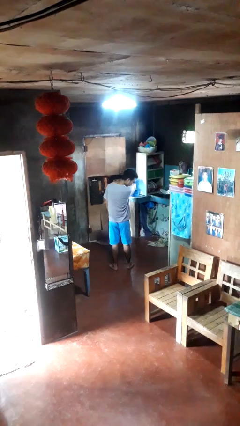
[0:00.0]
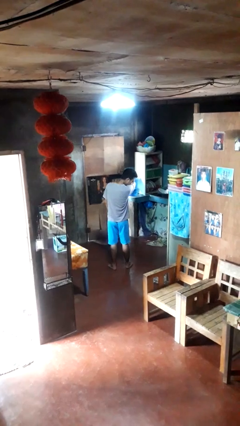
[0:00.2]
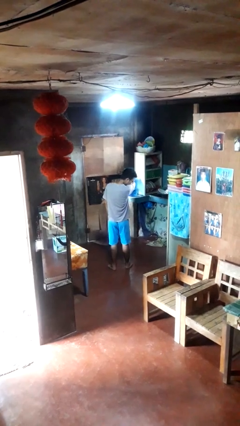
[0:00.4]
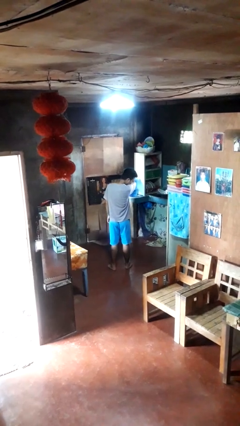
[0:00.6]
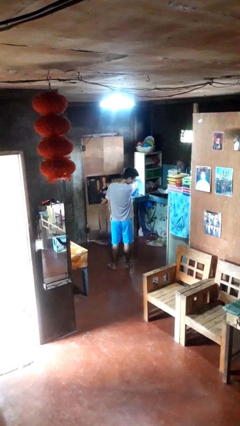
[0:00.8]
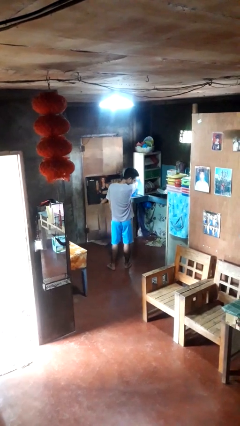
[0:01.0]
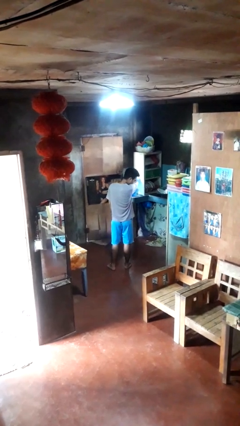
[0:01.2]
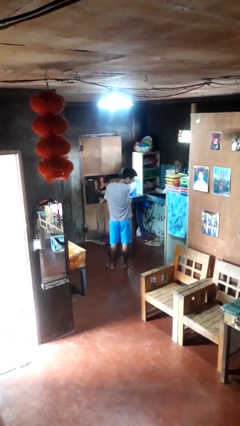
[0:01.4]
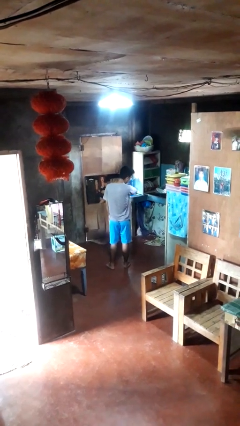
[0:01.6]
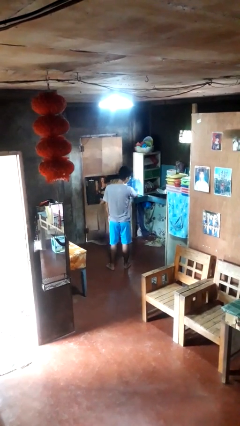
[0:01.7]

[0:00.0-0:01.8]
person sneezes into arm

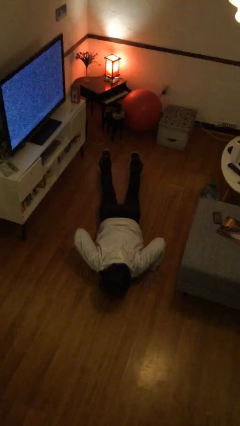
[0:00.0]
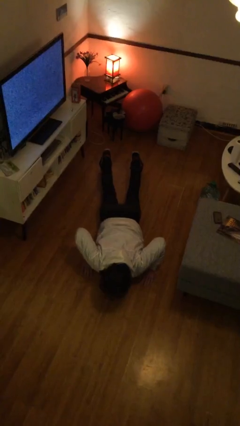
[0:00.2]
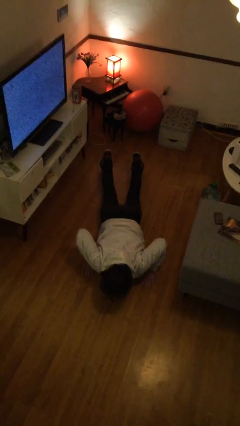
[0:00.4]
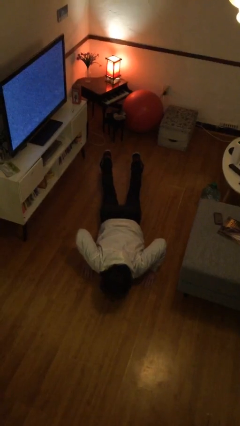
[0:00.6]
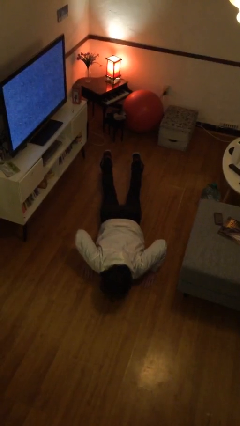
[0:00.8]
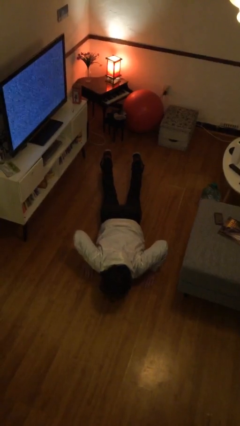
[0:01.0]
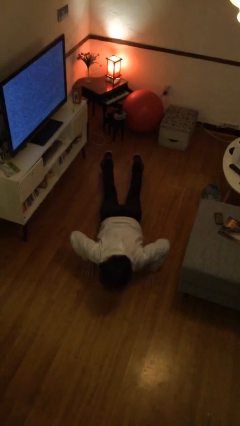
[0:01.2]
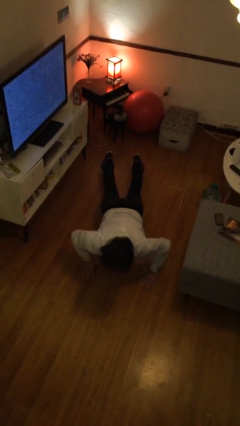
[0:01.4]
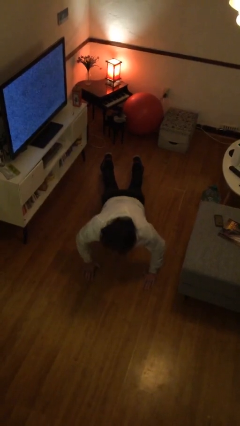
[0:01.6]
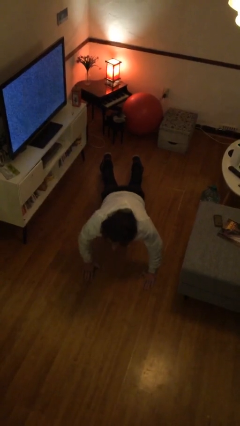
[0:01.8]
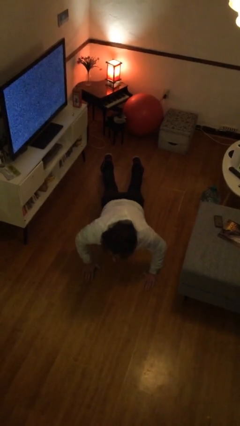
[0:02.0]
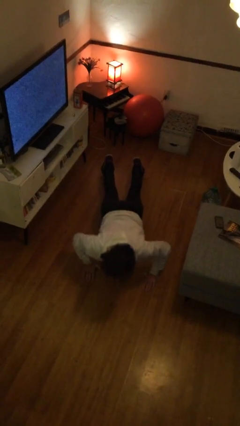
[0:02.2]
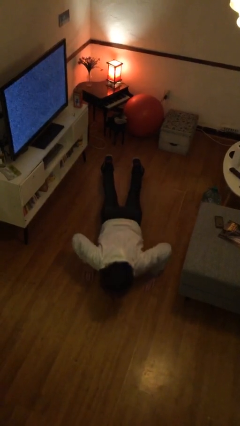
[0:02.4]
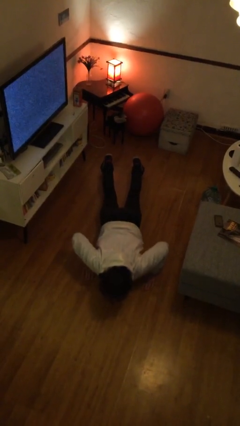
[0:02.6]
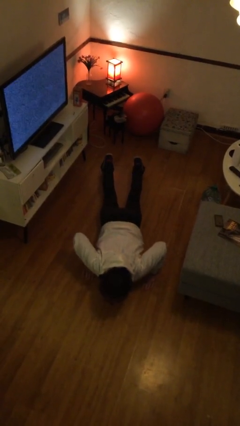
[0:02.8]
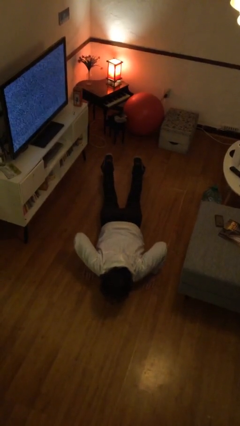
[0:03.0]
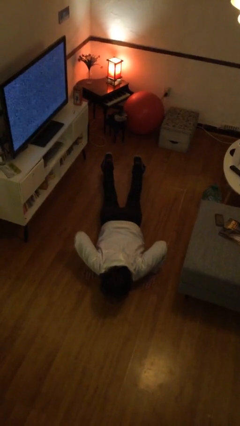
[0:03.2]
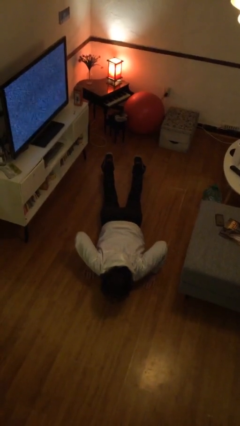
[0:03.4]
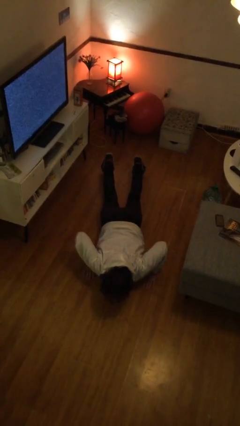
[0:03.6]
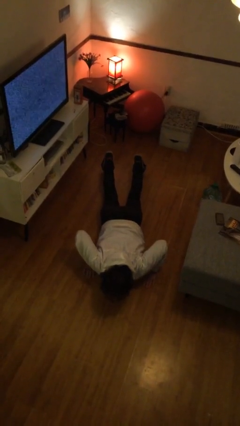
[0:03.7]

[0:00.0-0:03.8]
person exercises with pushup

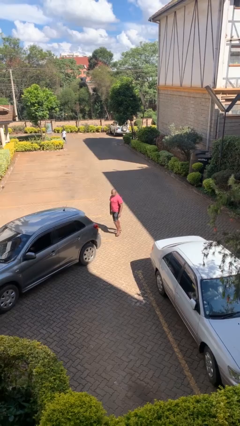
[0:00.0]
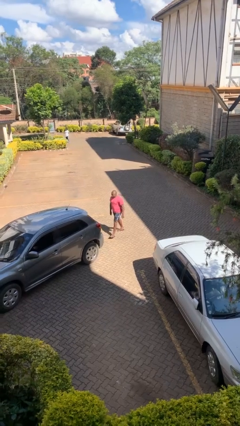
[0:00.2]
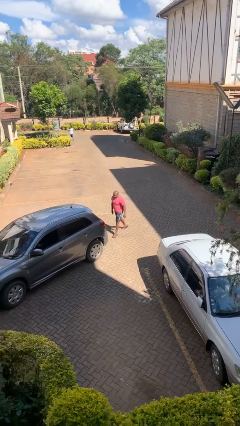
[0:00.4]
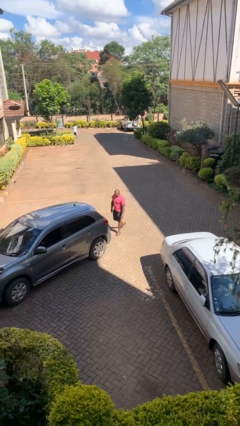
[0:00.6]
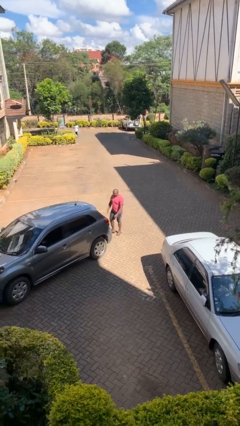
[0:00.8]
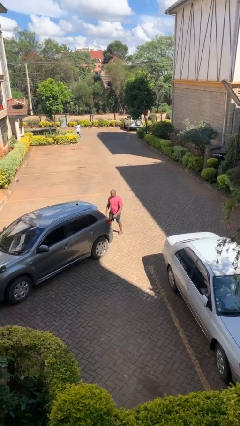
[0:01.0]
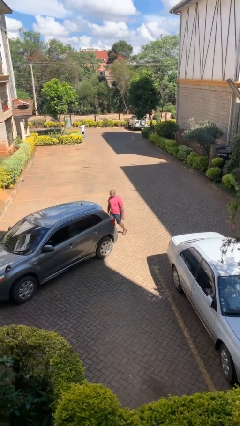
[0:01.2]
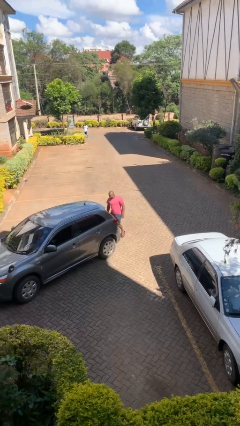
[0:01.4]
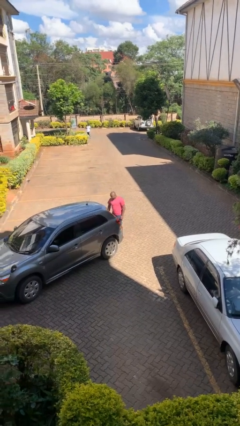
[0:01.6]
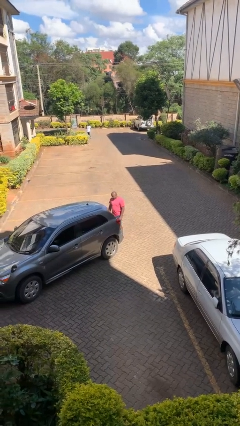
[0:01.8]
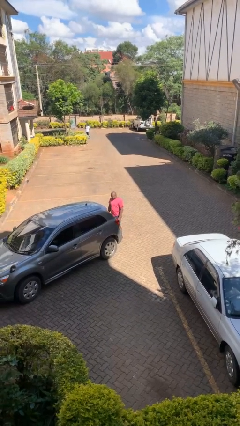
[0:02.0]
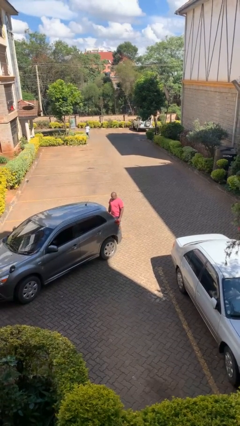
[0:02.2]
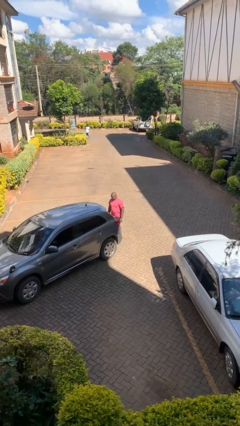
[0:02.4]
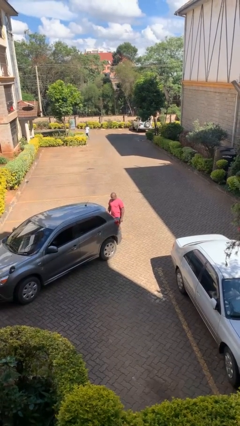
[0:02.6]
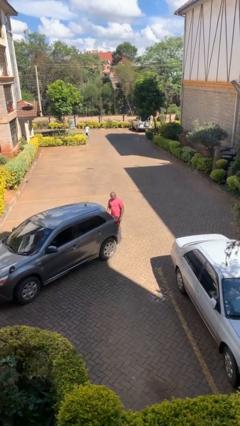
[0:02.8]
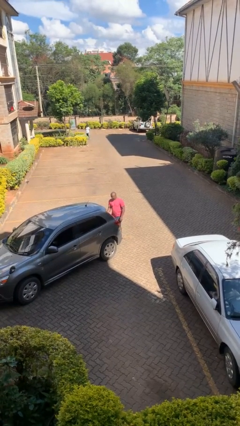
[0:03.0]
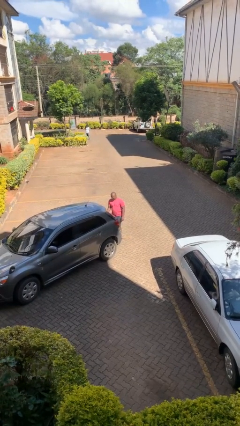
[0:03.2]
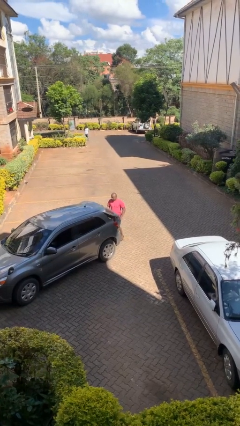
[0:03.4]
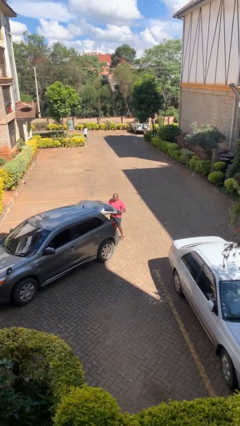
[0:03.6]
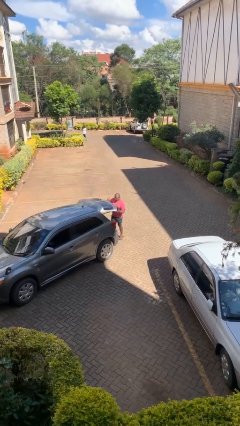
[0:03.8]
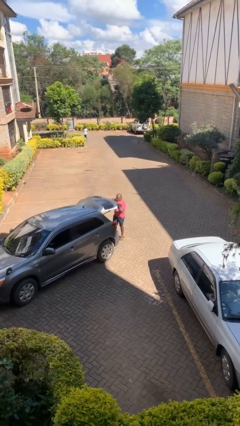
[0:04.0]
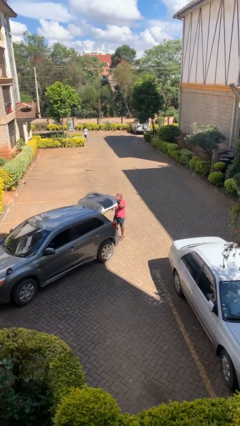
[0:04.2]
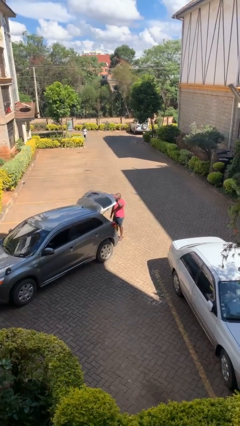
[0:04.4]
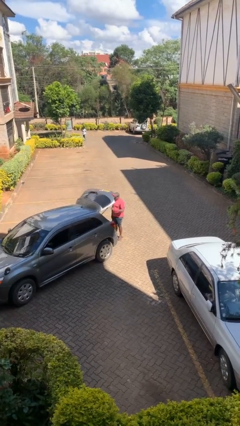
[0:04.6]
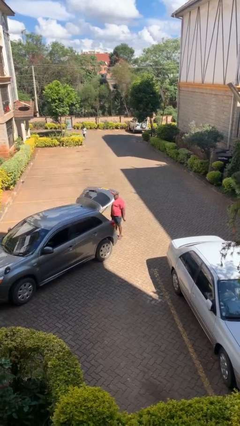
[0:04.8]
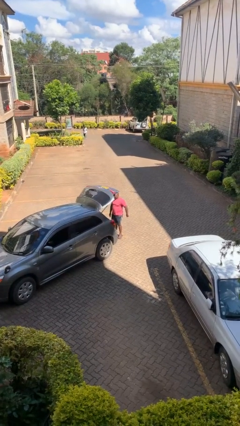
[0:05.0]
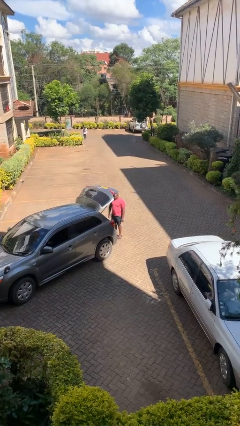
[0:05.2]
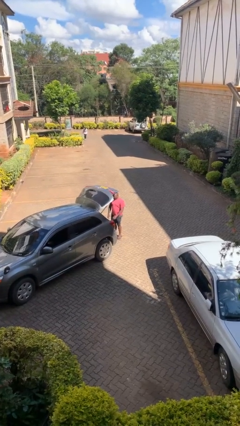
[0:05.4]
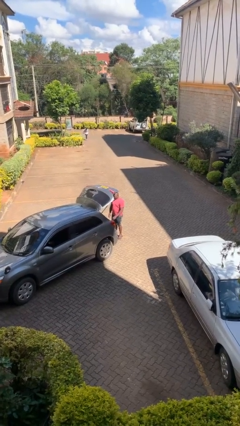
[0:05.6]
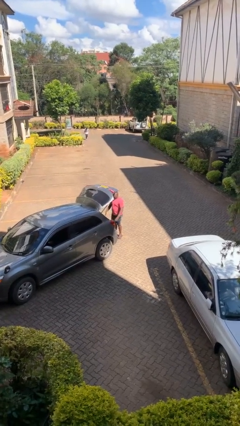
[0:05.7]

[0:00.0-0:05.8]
person opens car trunk

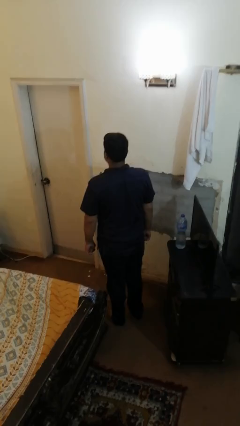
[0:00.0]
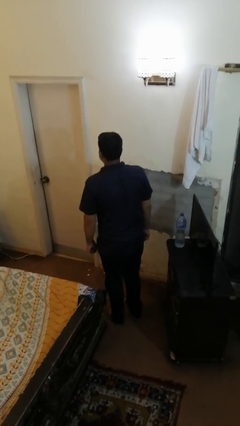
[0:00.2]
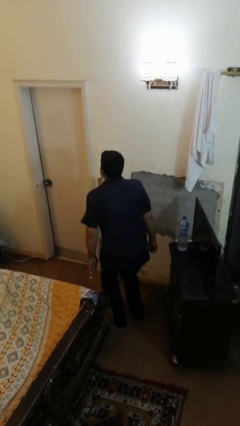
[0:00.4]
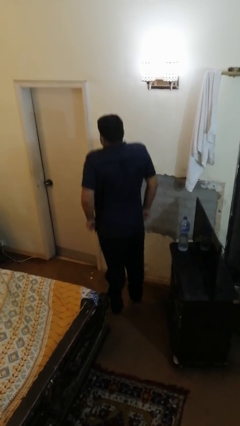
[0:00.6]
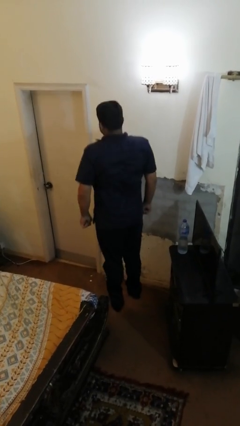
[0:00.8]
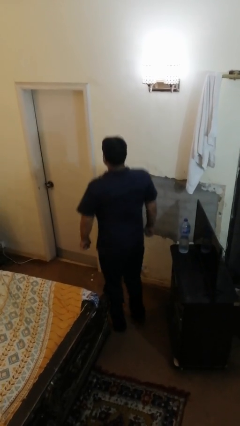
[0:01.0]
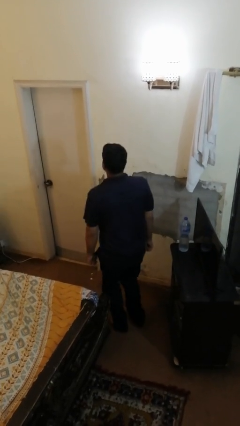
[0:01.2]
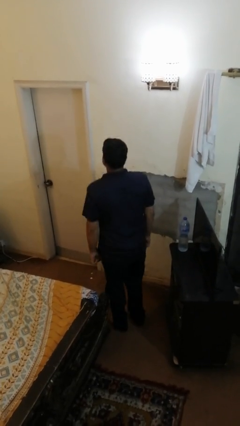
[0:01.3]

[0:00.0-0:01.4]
person jumps

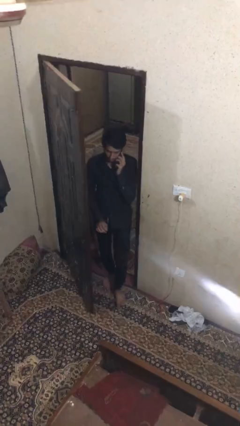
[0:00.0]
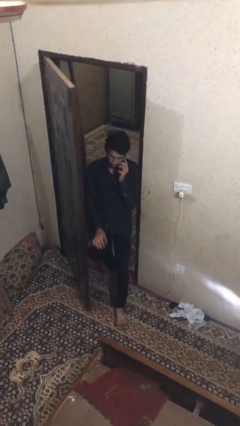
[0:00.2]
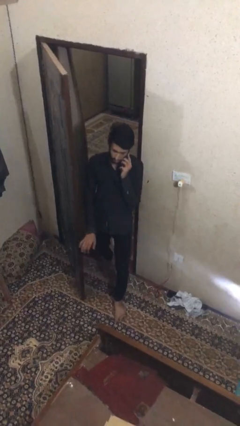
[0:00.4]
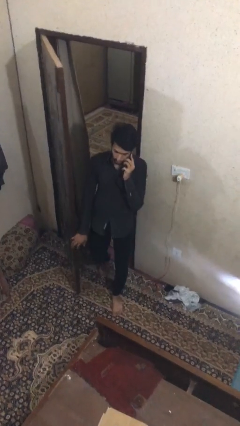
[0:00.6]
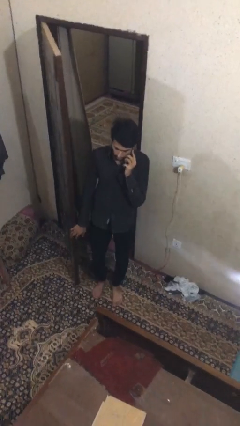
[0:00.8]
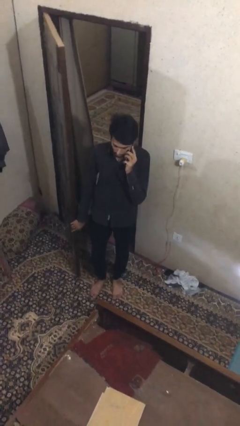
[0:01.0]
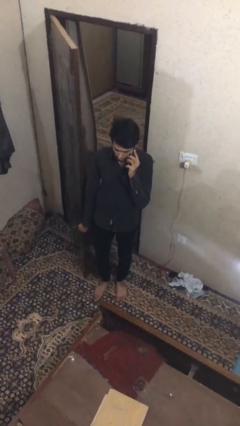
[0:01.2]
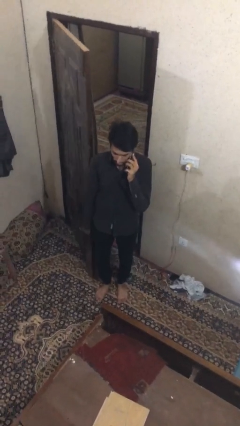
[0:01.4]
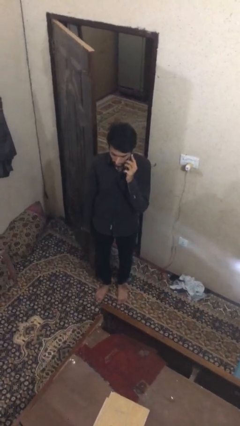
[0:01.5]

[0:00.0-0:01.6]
person enters scene through structure

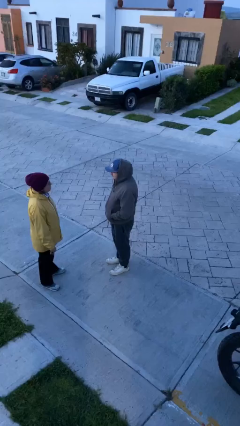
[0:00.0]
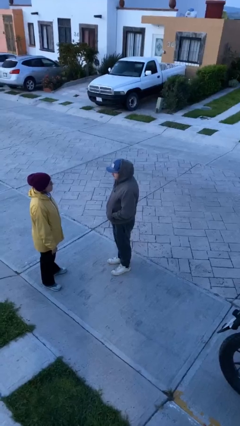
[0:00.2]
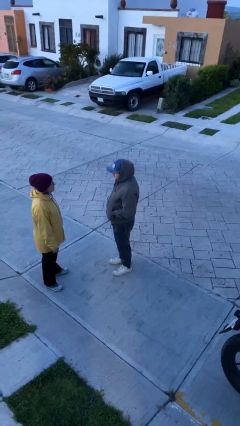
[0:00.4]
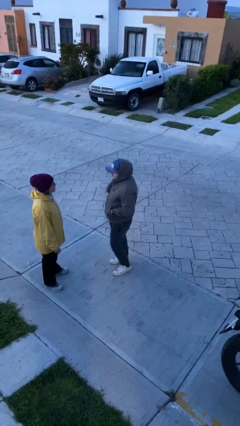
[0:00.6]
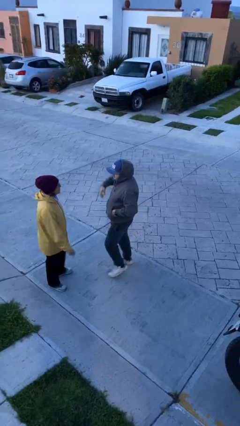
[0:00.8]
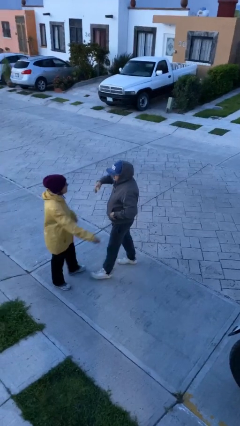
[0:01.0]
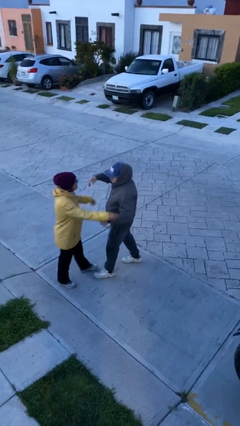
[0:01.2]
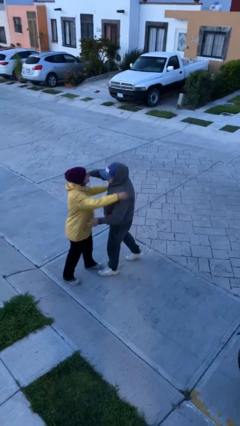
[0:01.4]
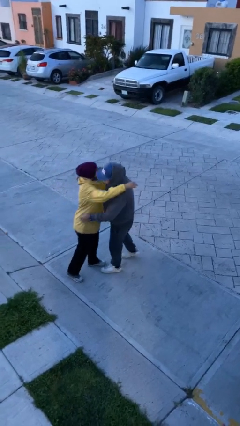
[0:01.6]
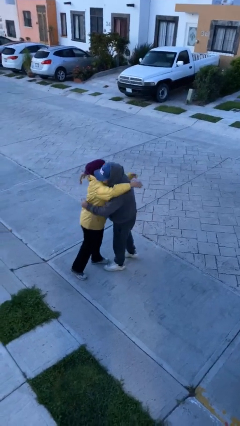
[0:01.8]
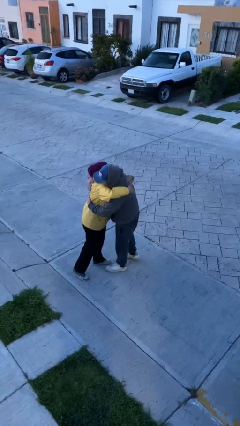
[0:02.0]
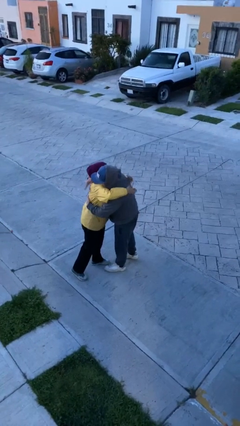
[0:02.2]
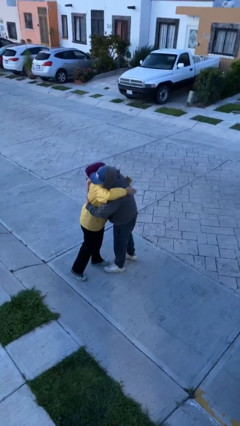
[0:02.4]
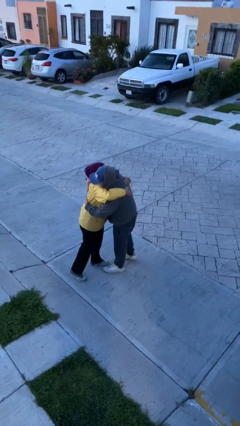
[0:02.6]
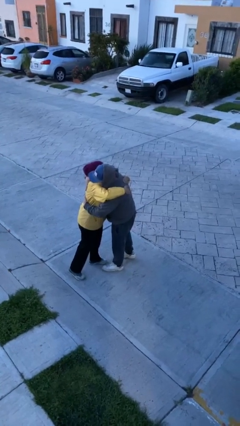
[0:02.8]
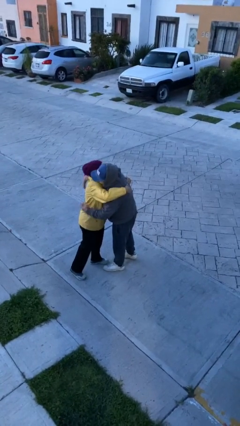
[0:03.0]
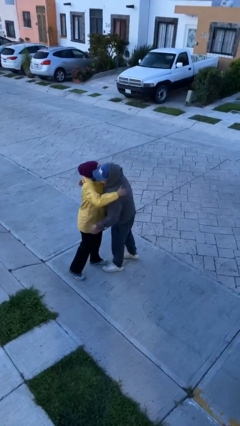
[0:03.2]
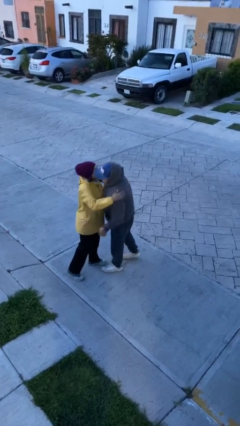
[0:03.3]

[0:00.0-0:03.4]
person embraces person
